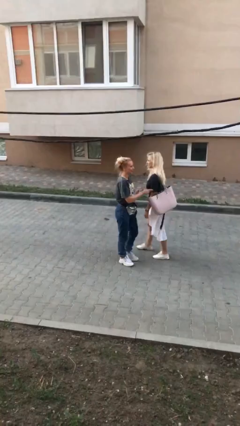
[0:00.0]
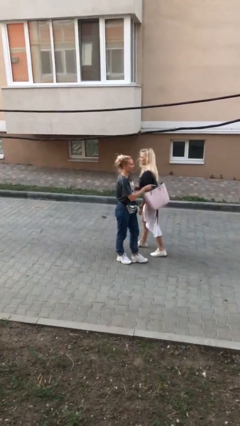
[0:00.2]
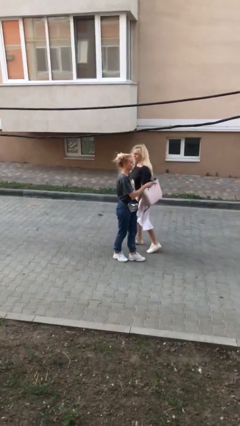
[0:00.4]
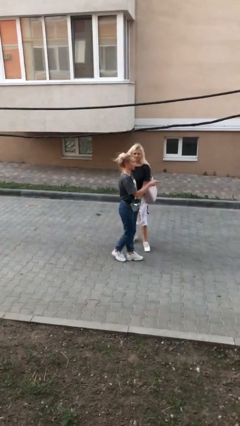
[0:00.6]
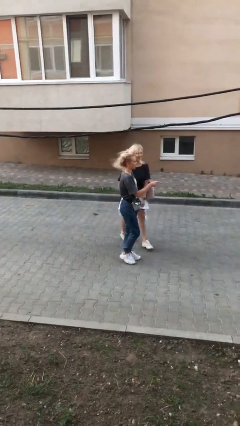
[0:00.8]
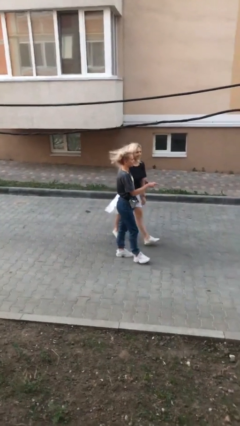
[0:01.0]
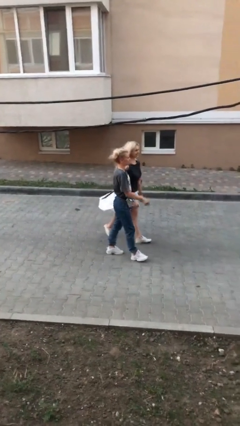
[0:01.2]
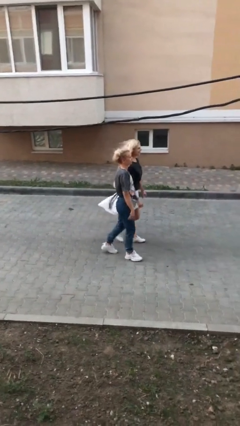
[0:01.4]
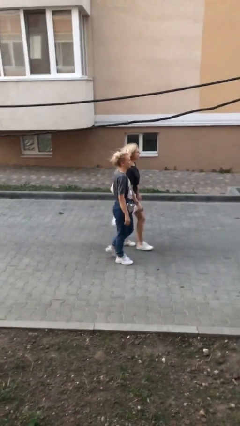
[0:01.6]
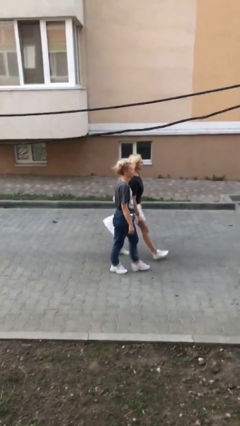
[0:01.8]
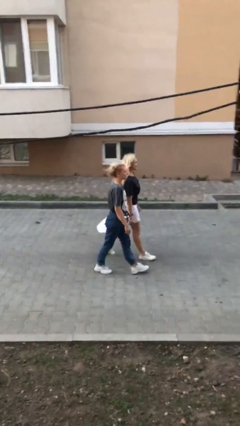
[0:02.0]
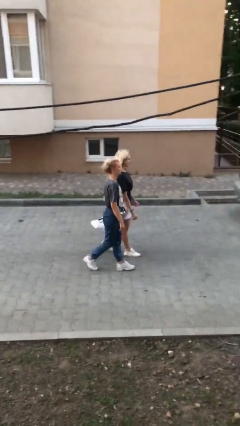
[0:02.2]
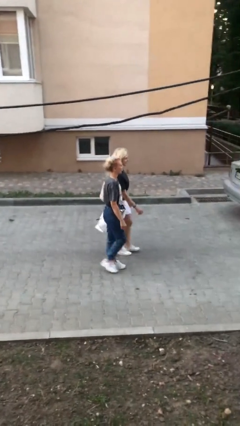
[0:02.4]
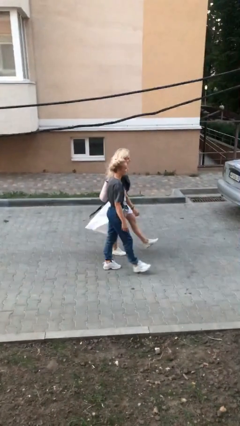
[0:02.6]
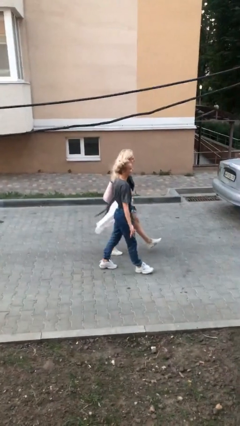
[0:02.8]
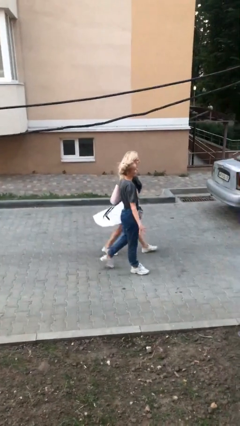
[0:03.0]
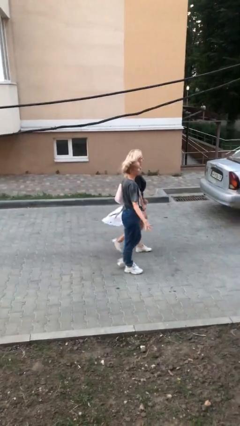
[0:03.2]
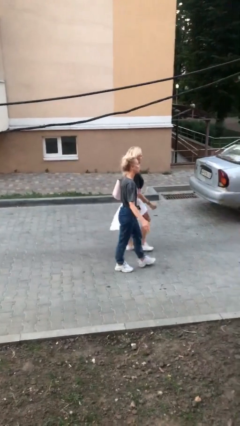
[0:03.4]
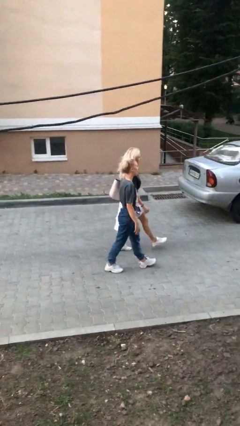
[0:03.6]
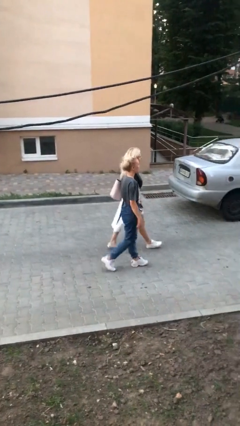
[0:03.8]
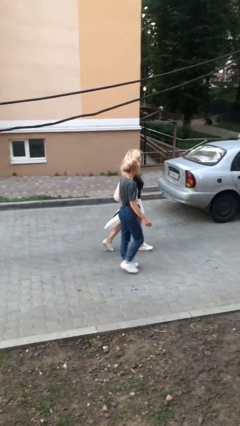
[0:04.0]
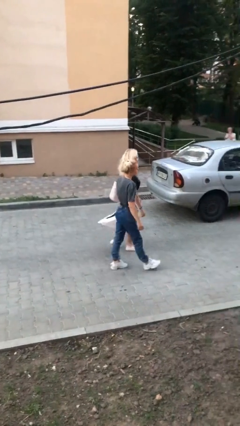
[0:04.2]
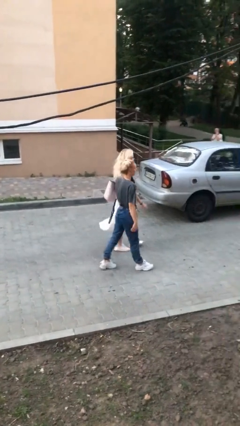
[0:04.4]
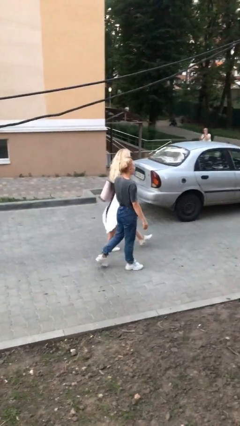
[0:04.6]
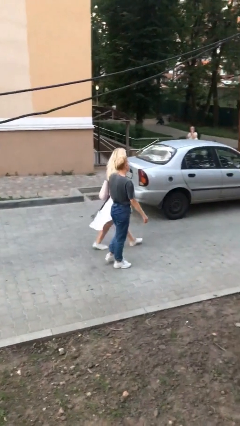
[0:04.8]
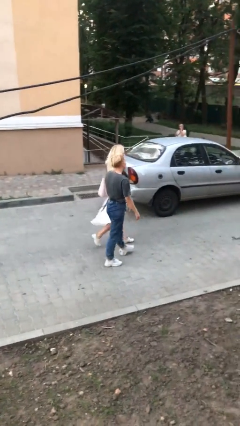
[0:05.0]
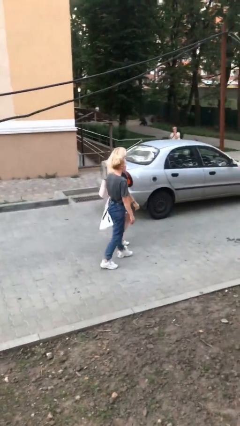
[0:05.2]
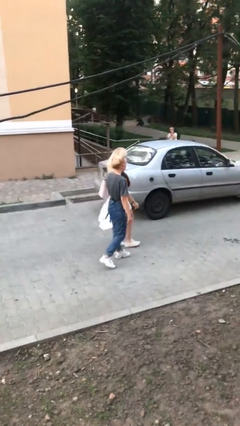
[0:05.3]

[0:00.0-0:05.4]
person talks to person

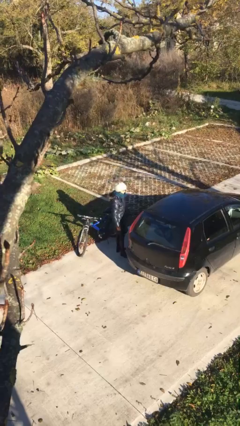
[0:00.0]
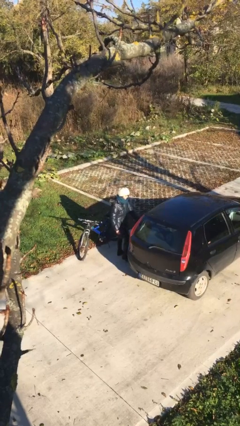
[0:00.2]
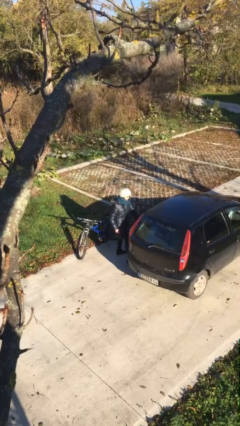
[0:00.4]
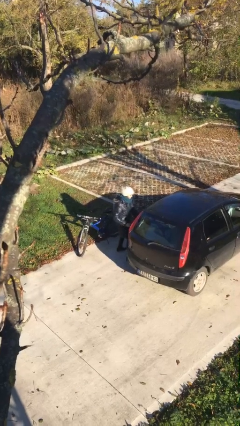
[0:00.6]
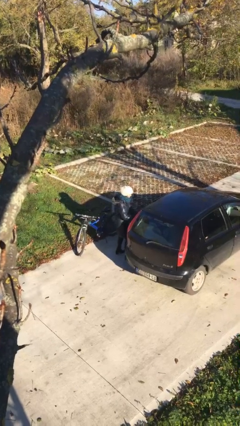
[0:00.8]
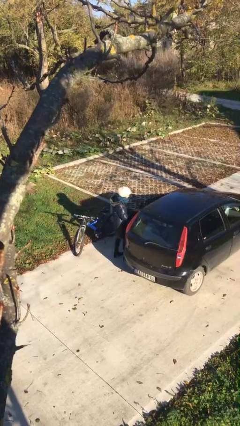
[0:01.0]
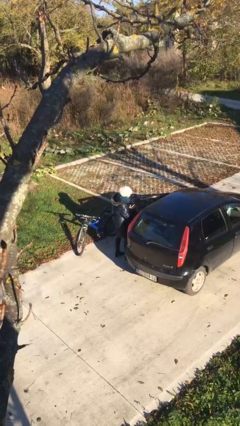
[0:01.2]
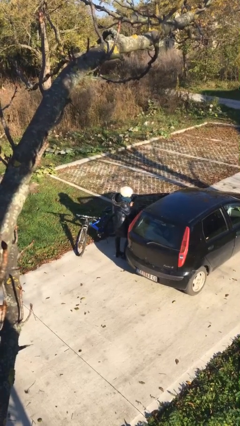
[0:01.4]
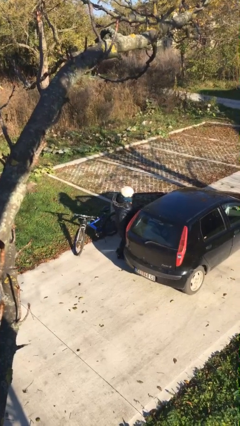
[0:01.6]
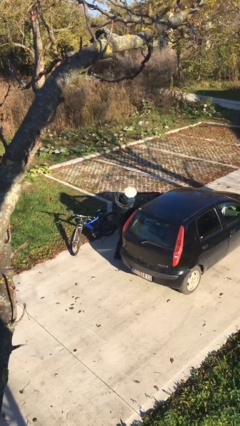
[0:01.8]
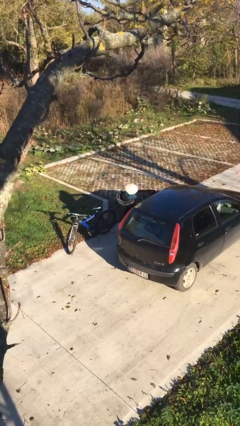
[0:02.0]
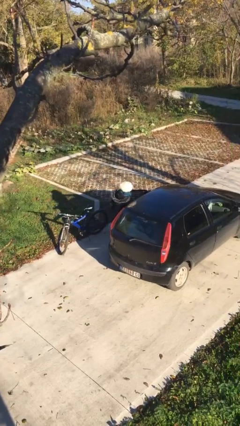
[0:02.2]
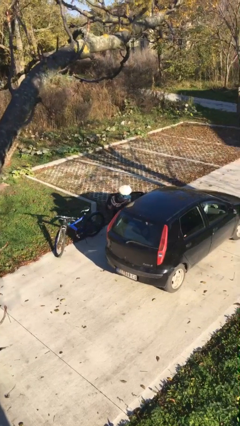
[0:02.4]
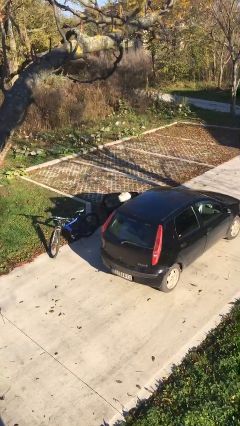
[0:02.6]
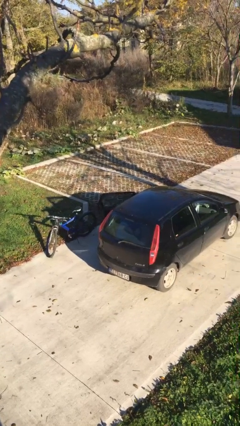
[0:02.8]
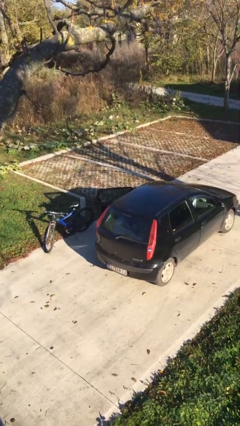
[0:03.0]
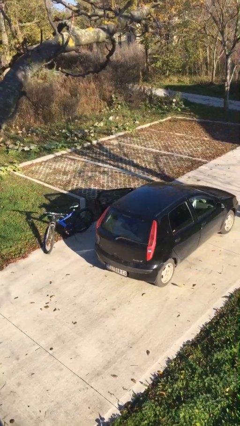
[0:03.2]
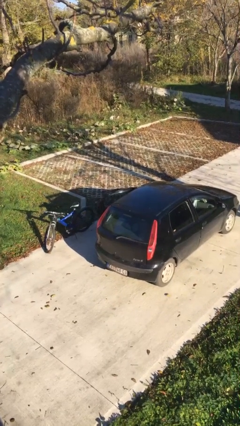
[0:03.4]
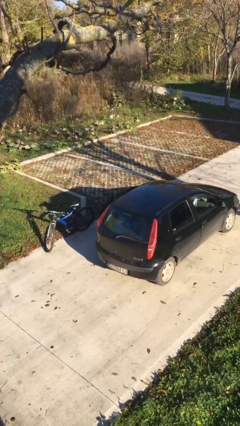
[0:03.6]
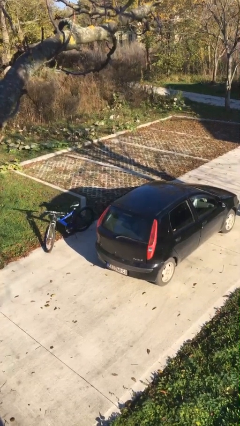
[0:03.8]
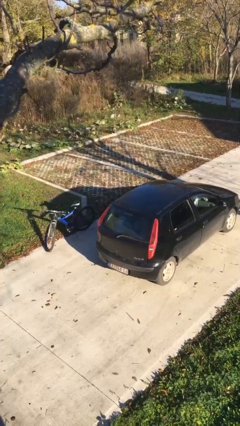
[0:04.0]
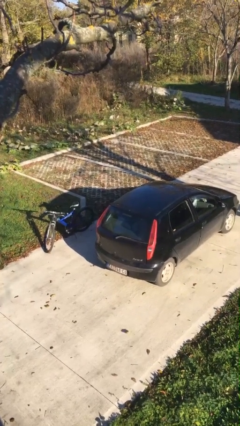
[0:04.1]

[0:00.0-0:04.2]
person enters car

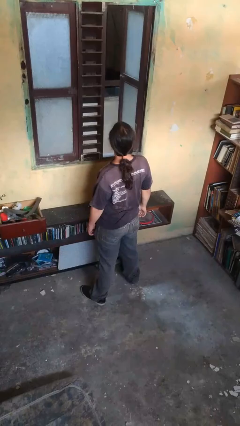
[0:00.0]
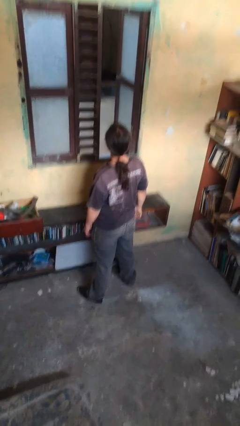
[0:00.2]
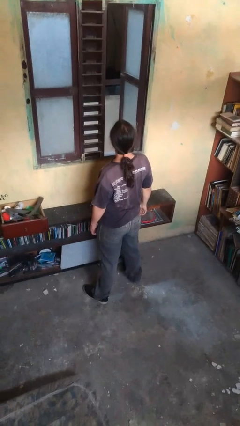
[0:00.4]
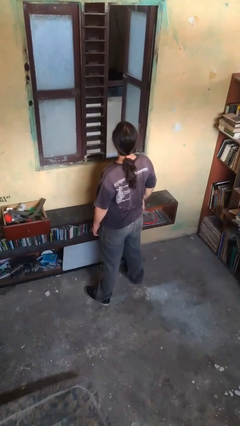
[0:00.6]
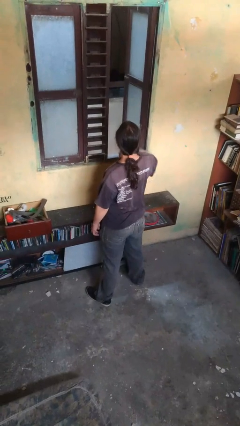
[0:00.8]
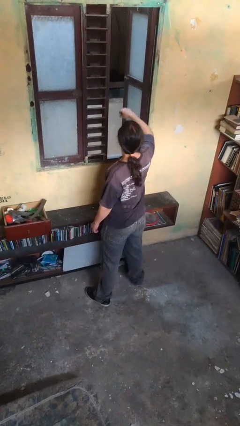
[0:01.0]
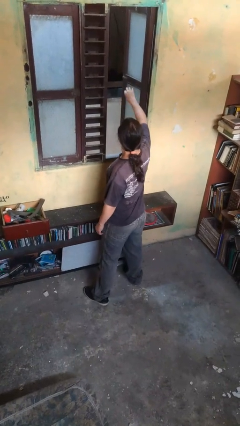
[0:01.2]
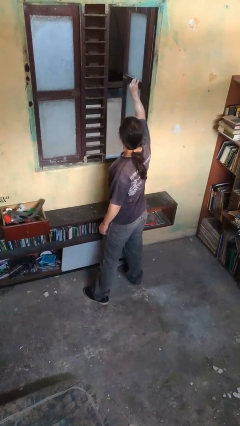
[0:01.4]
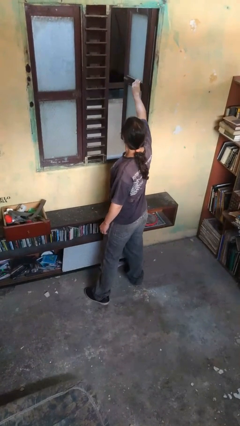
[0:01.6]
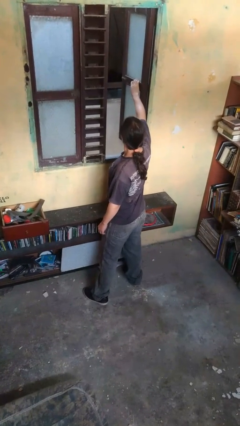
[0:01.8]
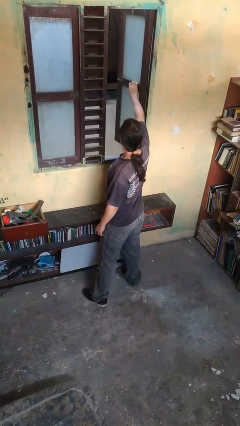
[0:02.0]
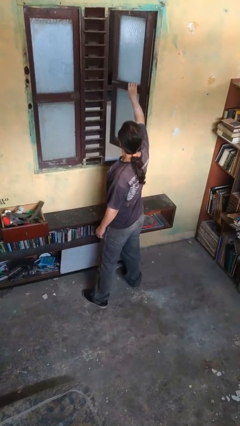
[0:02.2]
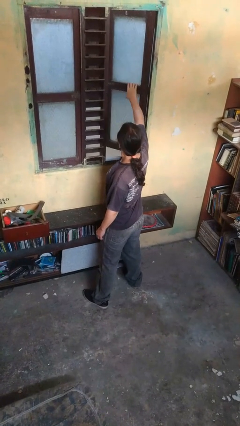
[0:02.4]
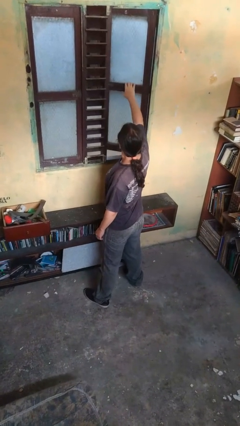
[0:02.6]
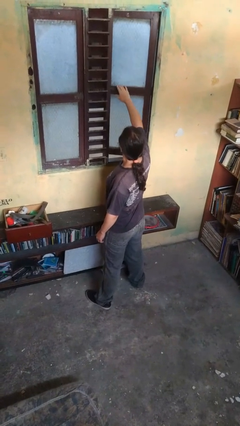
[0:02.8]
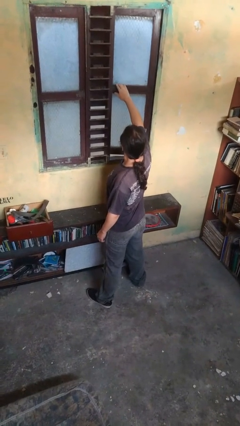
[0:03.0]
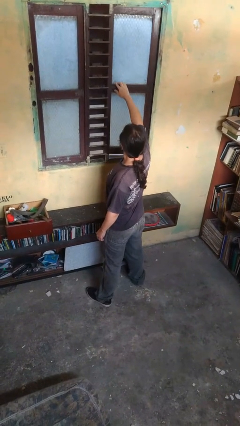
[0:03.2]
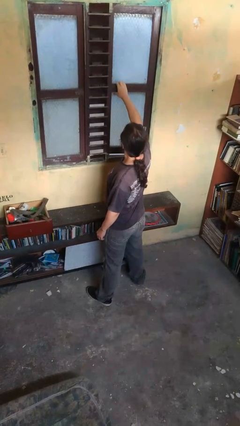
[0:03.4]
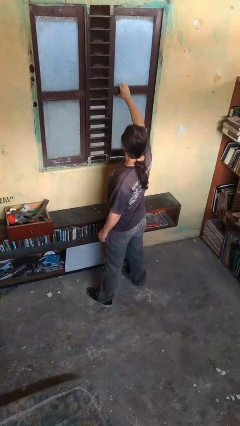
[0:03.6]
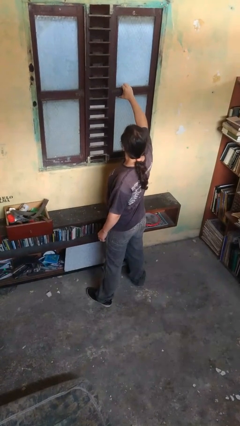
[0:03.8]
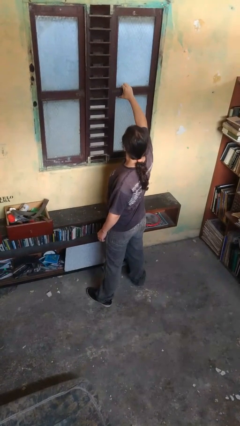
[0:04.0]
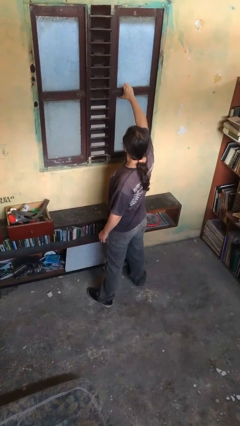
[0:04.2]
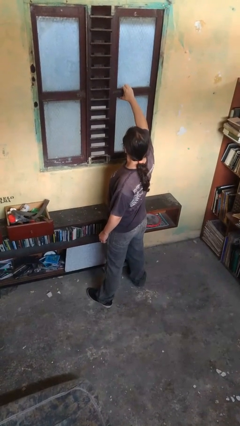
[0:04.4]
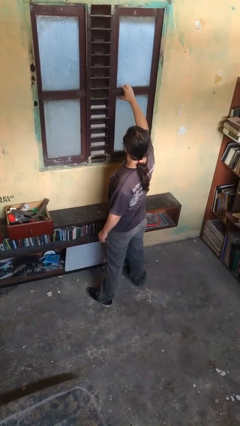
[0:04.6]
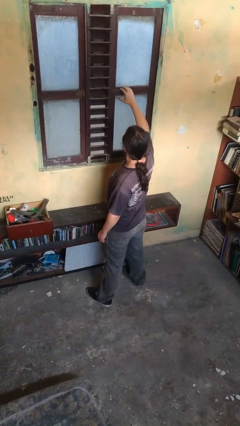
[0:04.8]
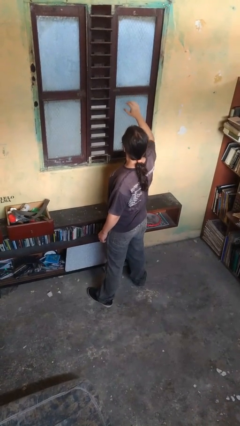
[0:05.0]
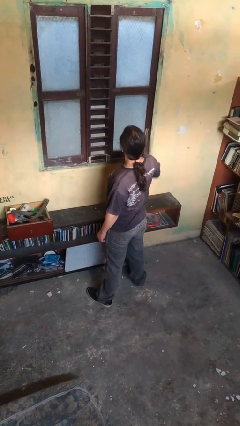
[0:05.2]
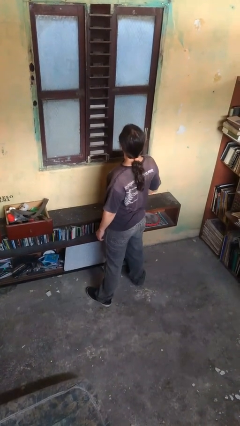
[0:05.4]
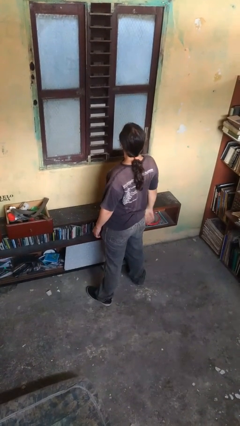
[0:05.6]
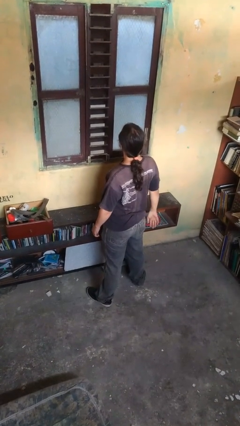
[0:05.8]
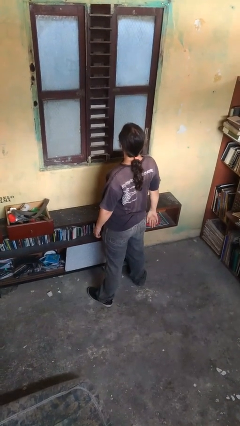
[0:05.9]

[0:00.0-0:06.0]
person closes home window

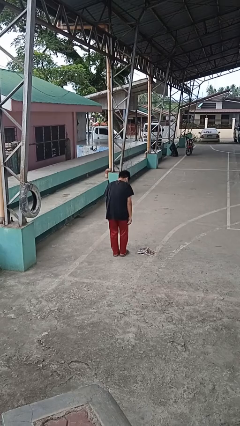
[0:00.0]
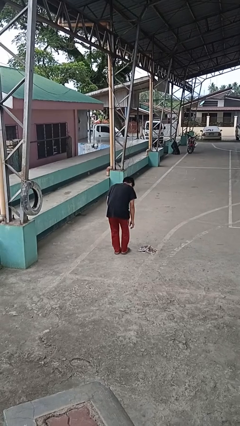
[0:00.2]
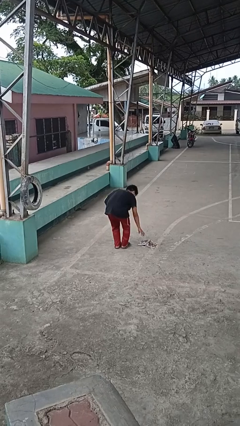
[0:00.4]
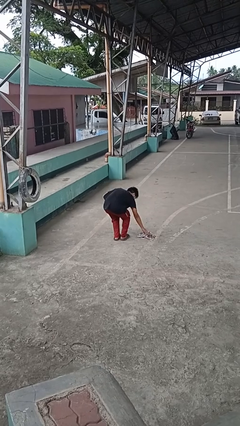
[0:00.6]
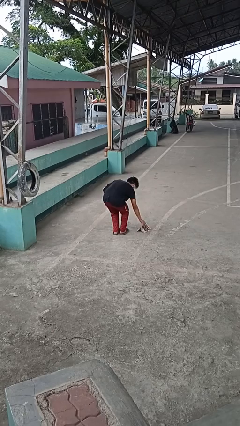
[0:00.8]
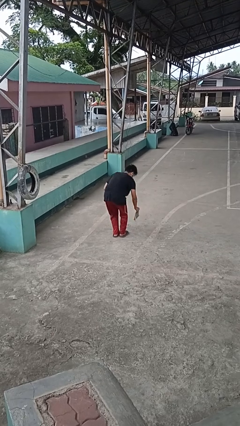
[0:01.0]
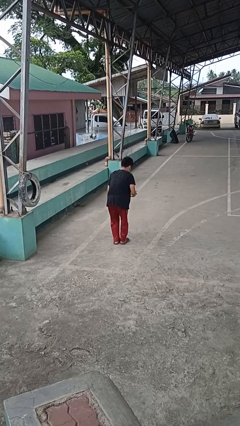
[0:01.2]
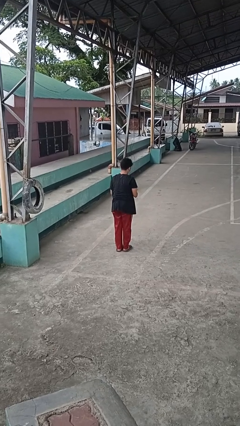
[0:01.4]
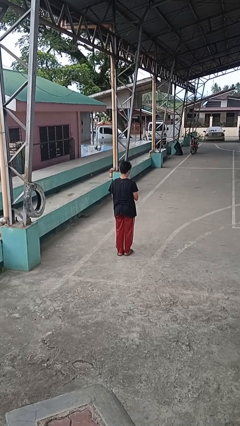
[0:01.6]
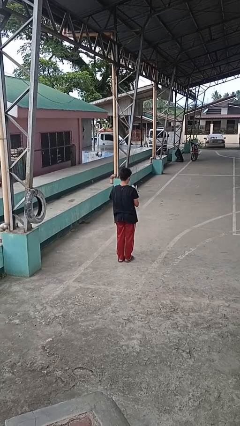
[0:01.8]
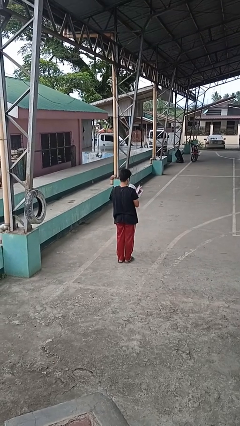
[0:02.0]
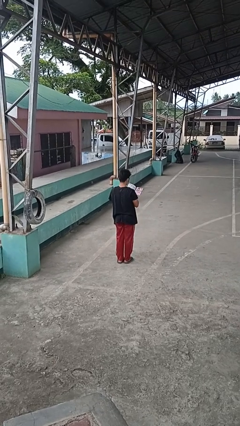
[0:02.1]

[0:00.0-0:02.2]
person picks up object from floor
